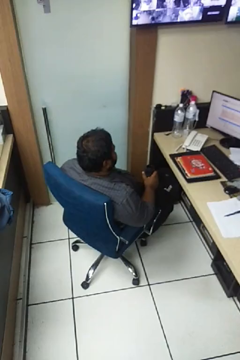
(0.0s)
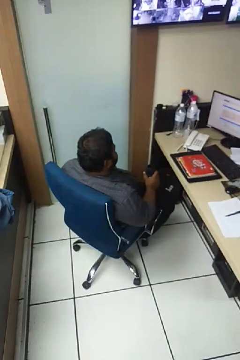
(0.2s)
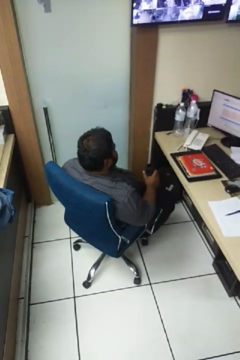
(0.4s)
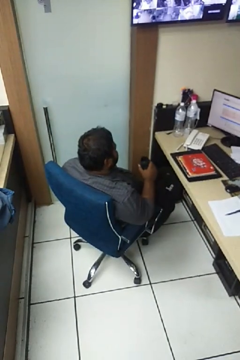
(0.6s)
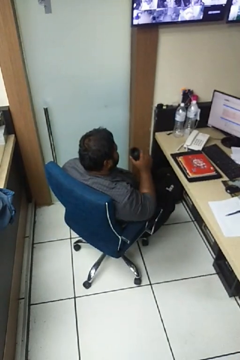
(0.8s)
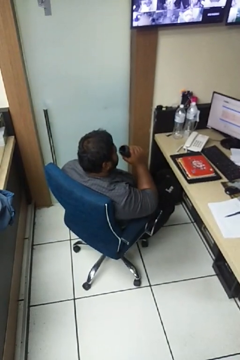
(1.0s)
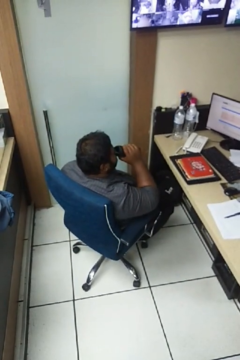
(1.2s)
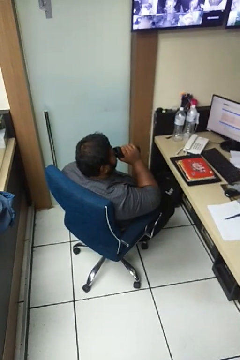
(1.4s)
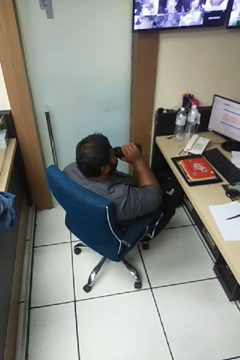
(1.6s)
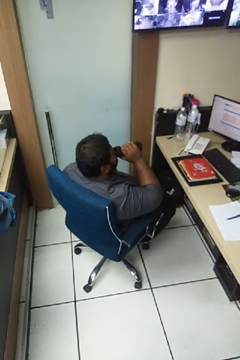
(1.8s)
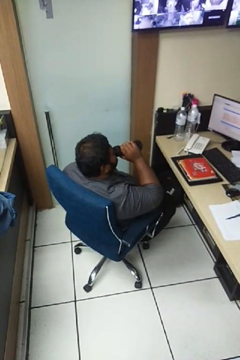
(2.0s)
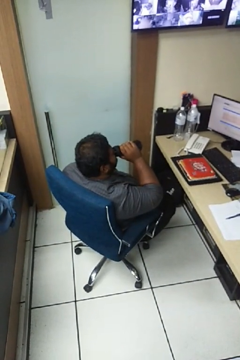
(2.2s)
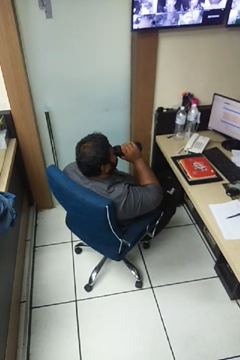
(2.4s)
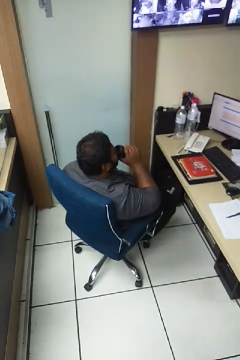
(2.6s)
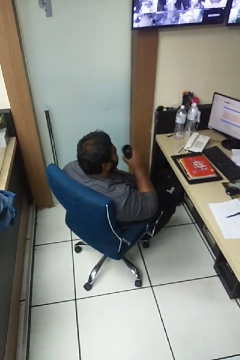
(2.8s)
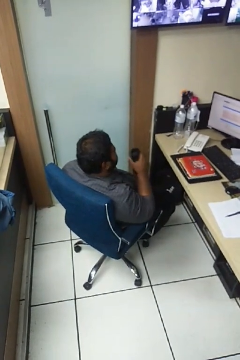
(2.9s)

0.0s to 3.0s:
person drinks from bottle

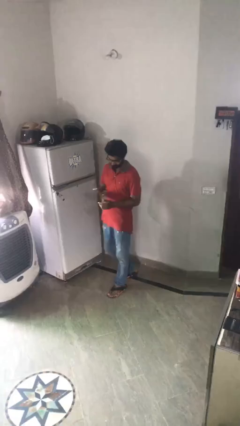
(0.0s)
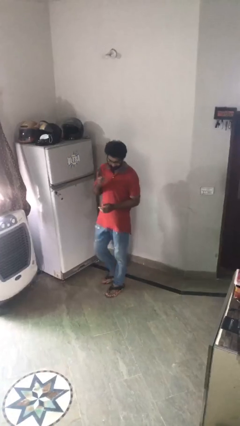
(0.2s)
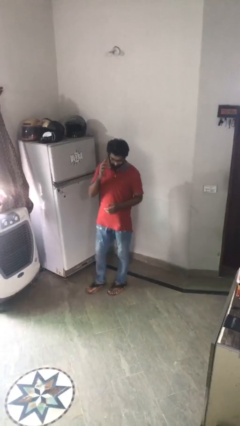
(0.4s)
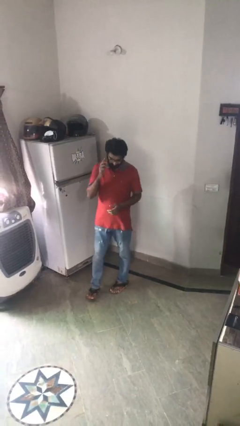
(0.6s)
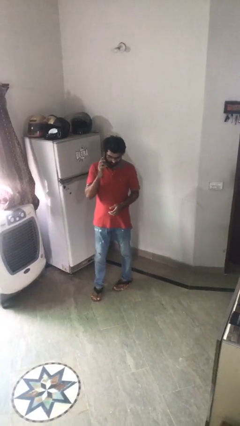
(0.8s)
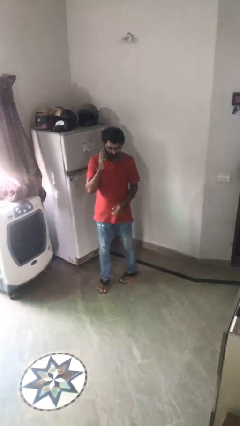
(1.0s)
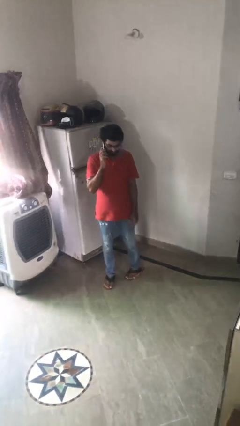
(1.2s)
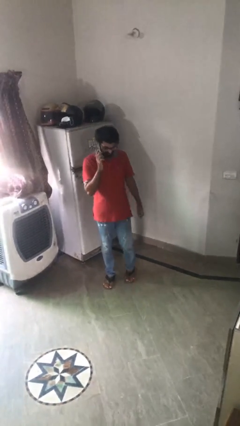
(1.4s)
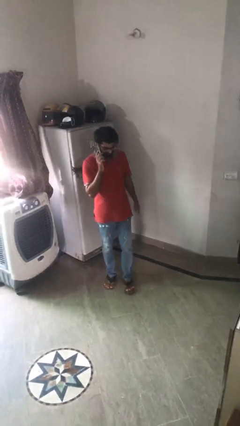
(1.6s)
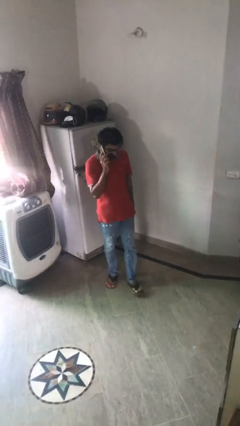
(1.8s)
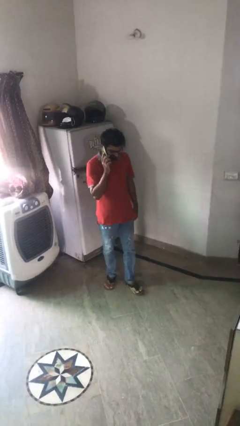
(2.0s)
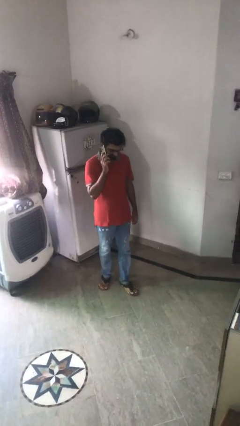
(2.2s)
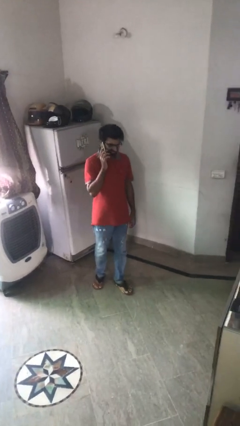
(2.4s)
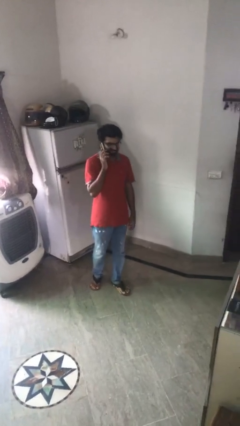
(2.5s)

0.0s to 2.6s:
person talks on phone

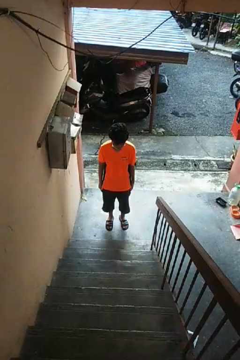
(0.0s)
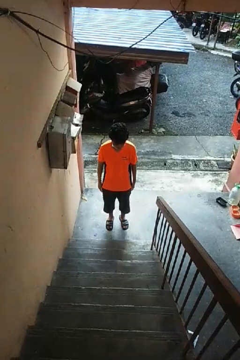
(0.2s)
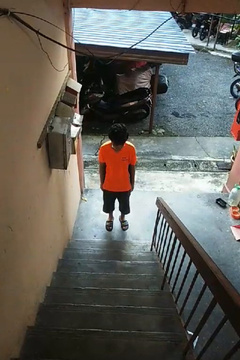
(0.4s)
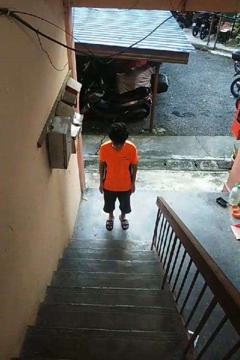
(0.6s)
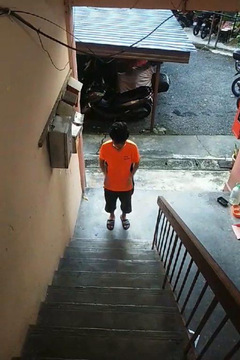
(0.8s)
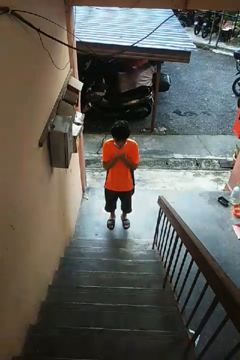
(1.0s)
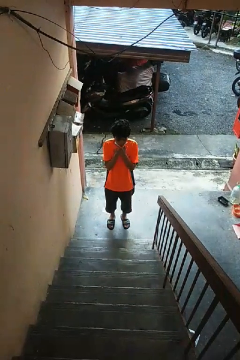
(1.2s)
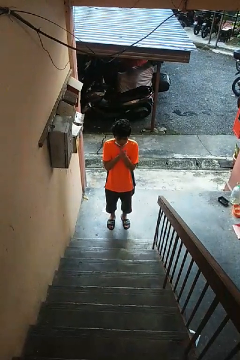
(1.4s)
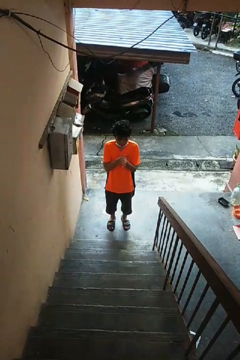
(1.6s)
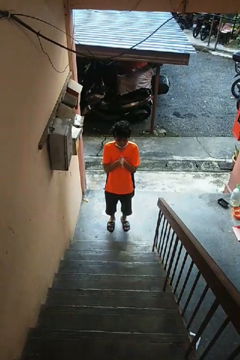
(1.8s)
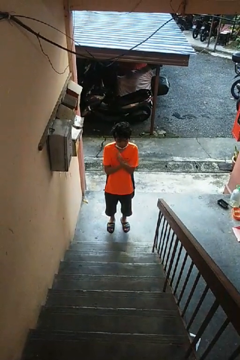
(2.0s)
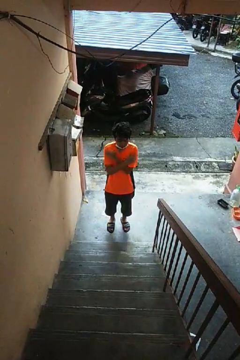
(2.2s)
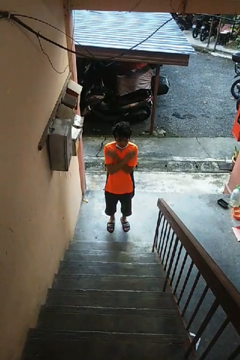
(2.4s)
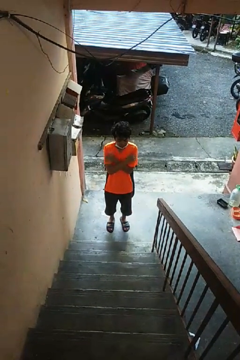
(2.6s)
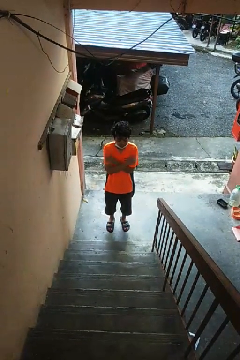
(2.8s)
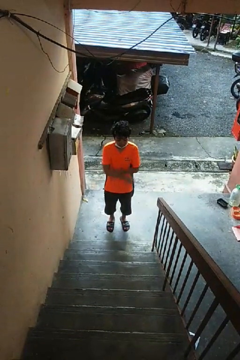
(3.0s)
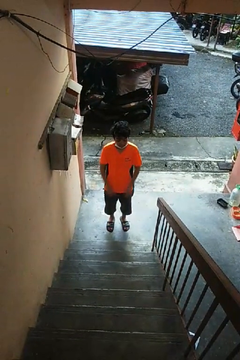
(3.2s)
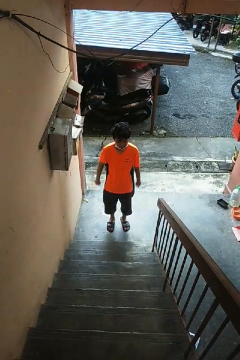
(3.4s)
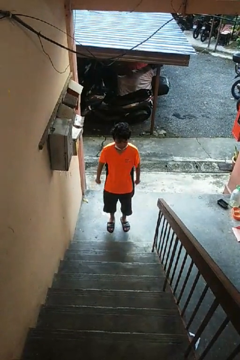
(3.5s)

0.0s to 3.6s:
person blows into hands

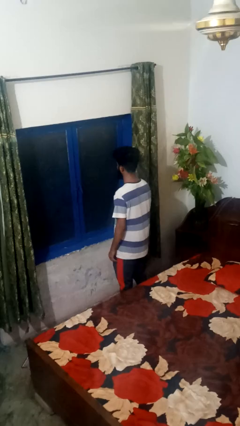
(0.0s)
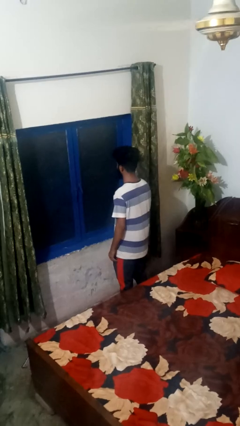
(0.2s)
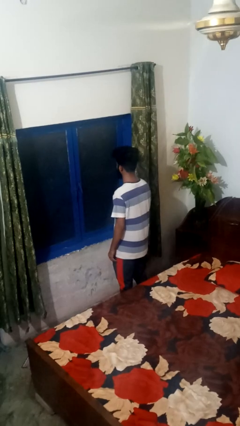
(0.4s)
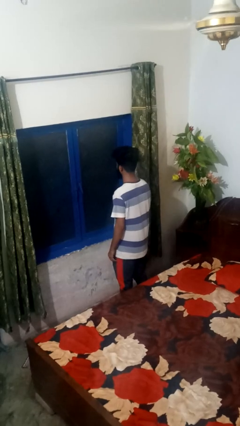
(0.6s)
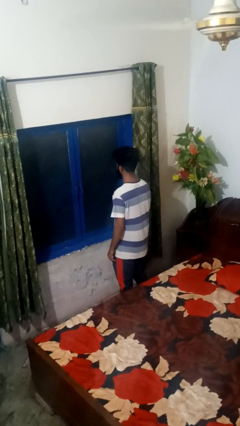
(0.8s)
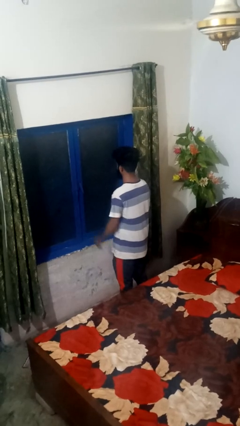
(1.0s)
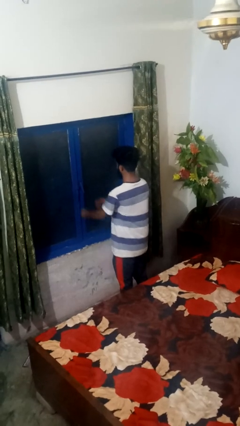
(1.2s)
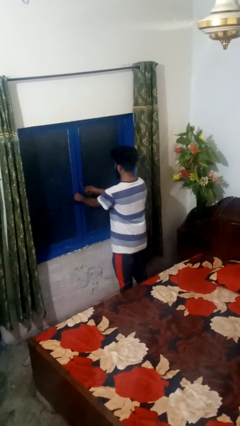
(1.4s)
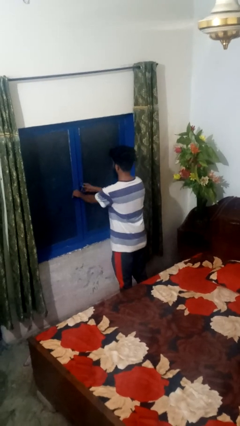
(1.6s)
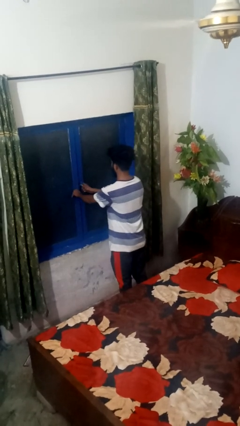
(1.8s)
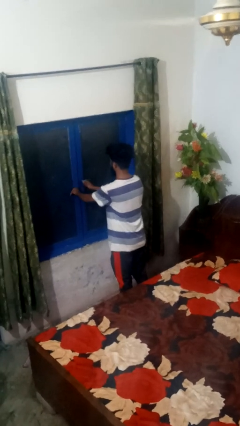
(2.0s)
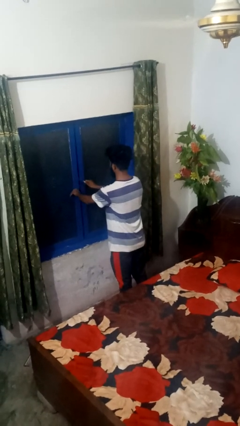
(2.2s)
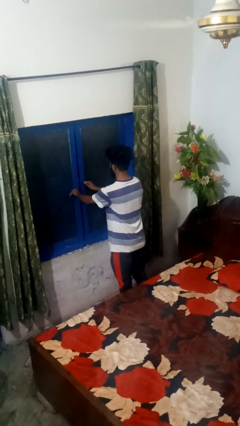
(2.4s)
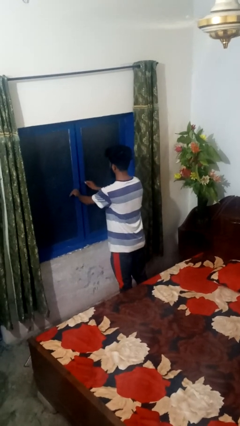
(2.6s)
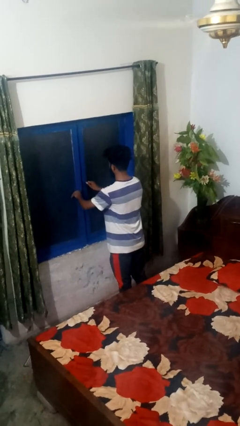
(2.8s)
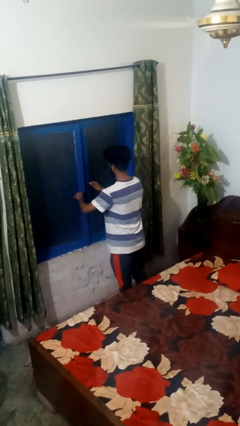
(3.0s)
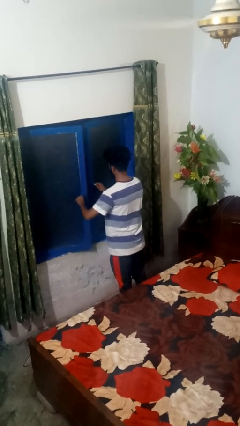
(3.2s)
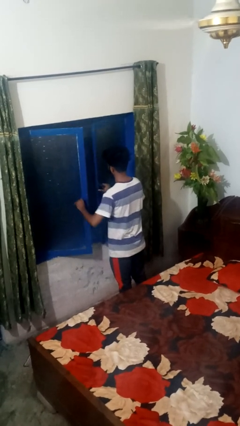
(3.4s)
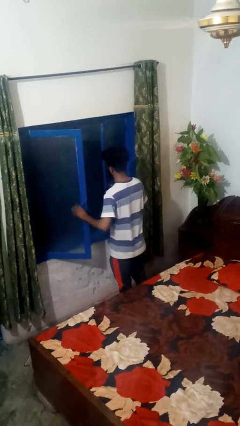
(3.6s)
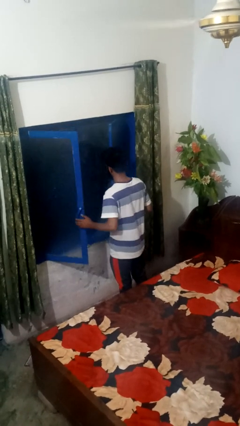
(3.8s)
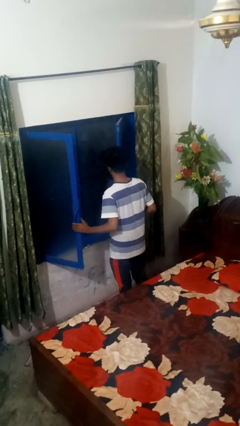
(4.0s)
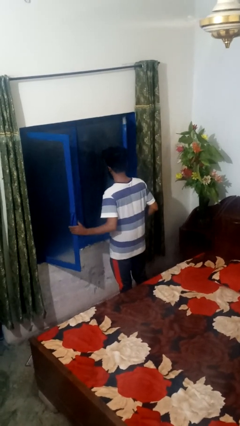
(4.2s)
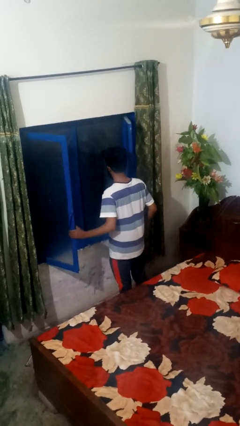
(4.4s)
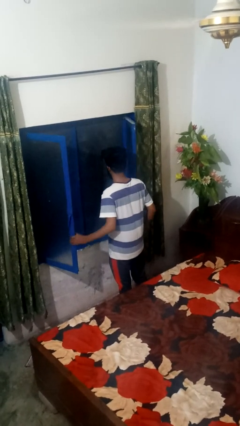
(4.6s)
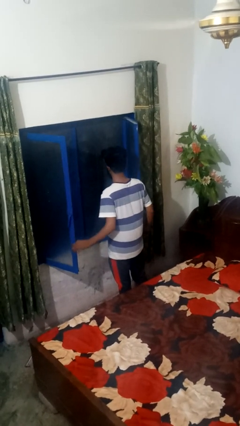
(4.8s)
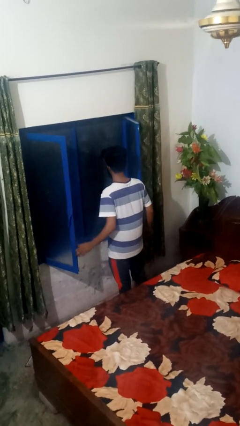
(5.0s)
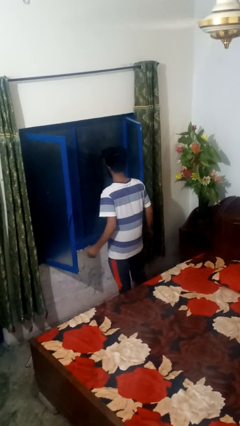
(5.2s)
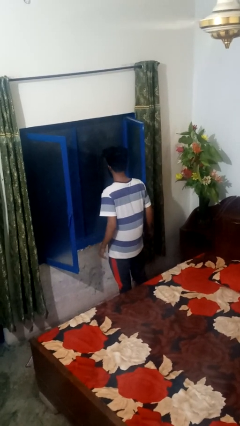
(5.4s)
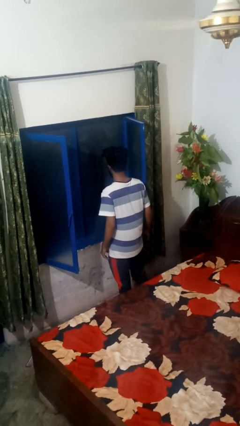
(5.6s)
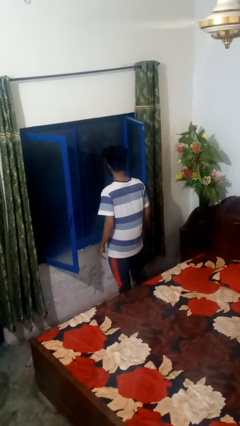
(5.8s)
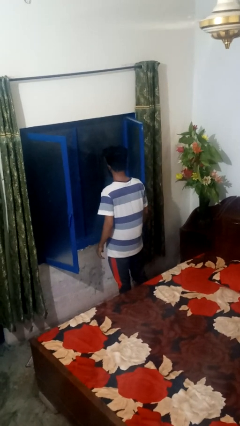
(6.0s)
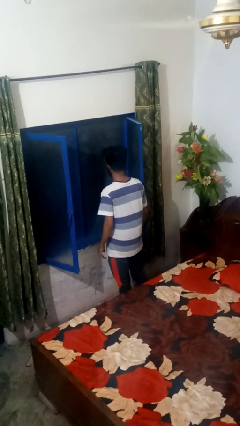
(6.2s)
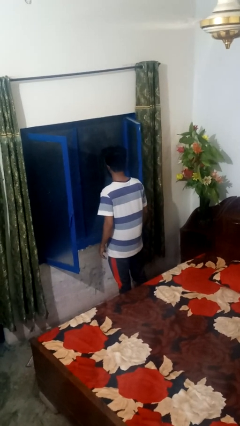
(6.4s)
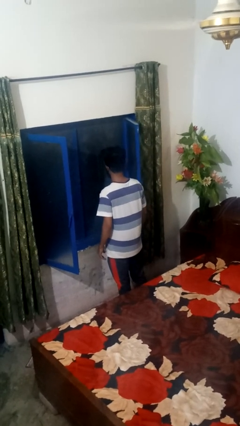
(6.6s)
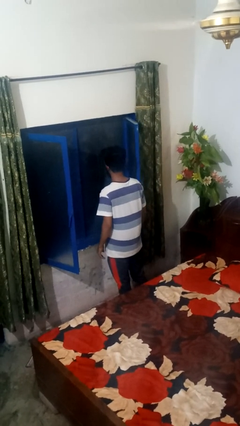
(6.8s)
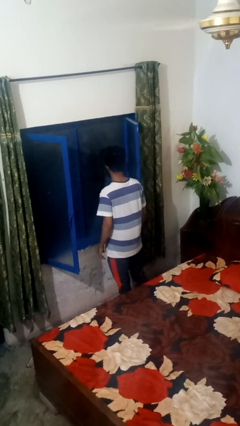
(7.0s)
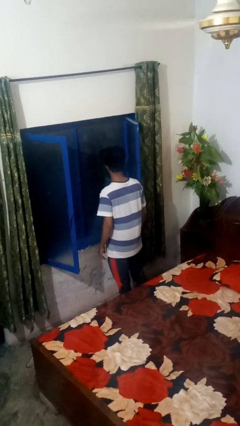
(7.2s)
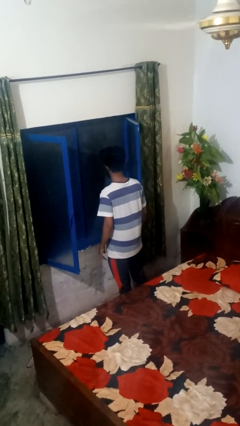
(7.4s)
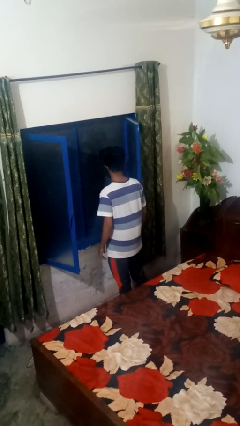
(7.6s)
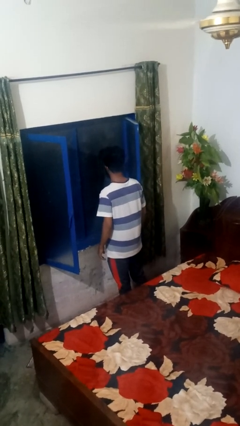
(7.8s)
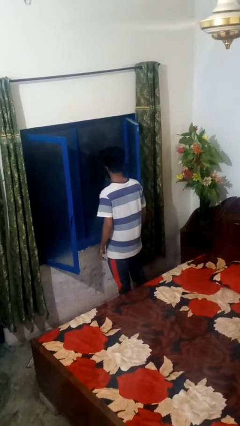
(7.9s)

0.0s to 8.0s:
person opens home window

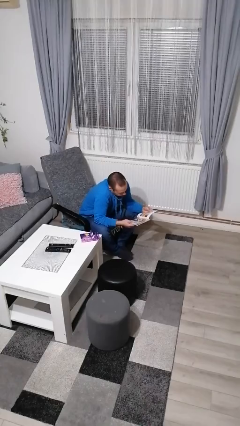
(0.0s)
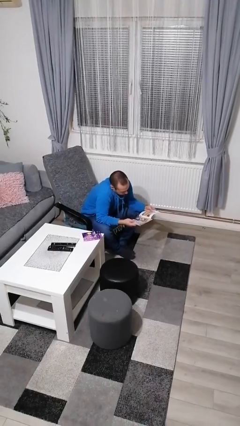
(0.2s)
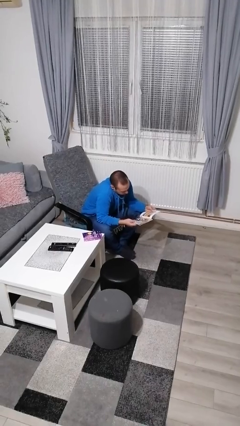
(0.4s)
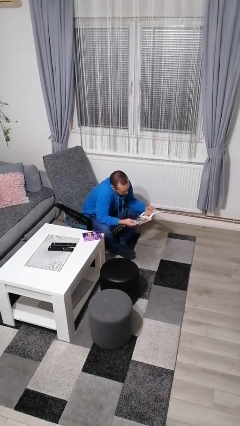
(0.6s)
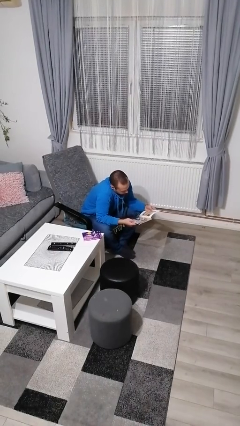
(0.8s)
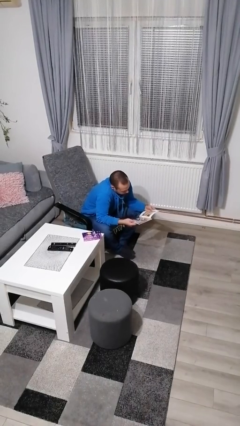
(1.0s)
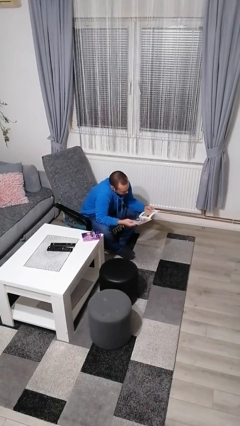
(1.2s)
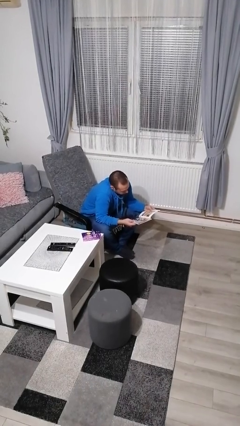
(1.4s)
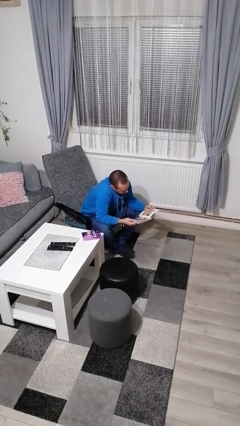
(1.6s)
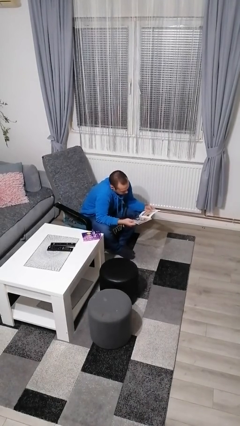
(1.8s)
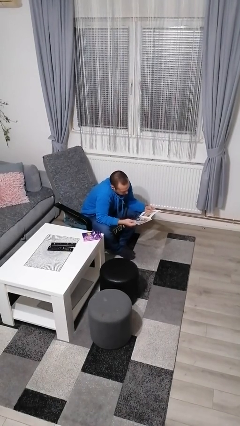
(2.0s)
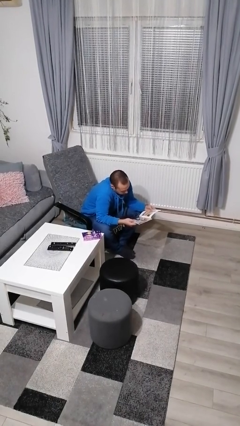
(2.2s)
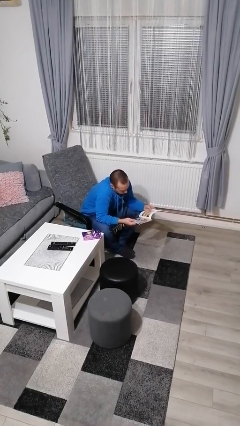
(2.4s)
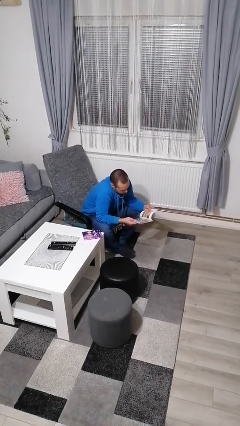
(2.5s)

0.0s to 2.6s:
person reads magazine
